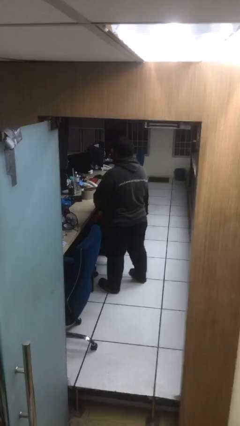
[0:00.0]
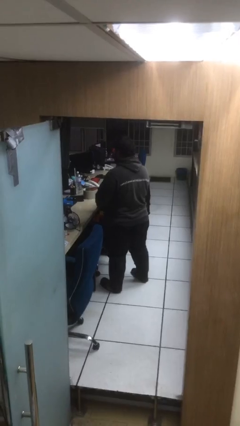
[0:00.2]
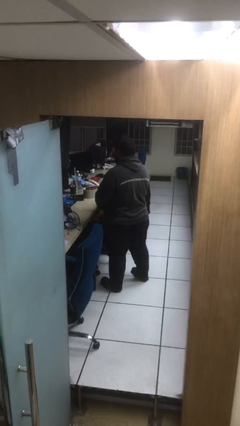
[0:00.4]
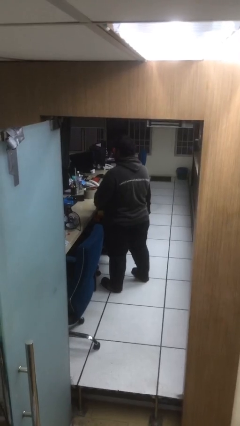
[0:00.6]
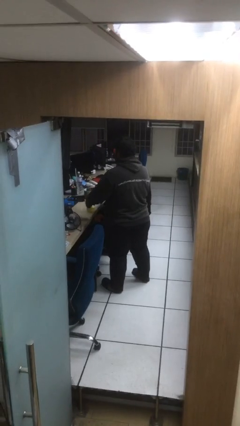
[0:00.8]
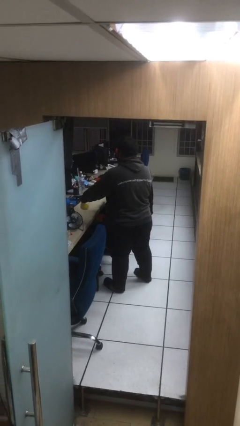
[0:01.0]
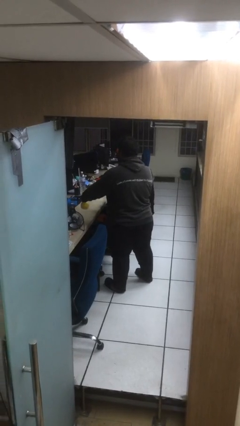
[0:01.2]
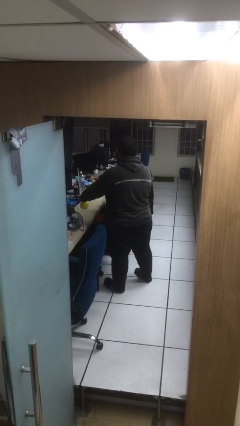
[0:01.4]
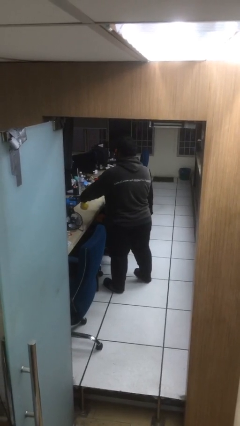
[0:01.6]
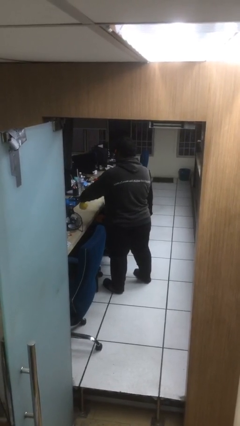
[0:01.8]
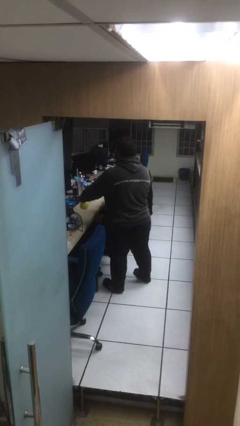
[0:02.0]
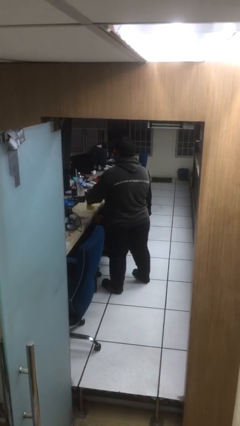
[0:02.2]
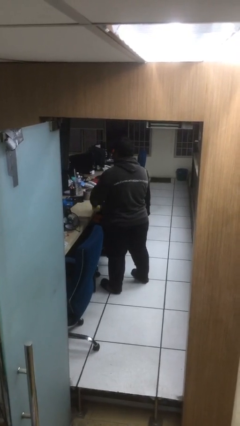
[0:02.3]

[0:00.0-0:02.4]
person sprays from bottle

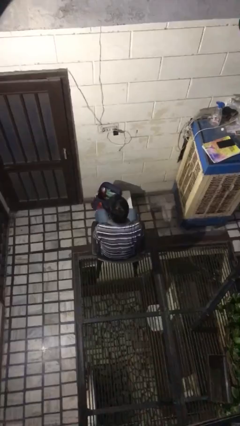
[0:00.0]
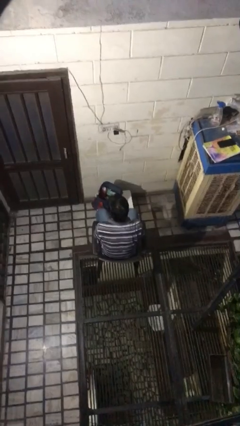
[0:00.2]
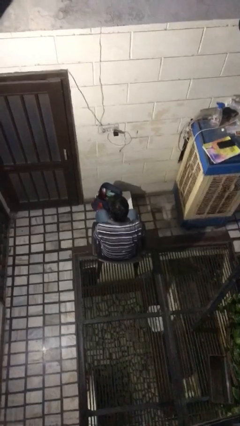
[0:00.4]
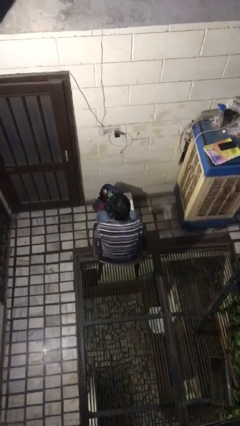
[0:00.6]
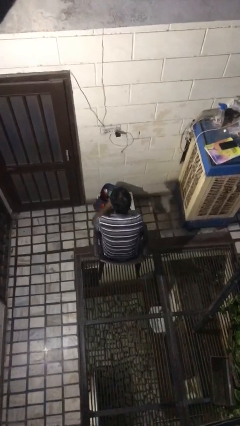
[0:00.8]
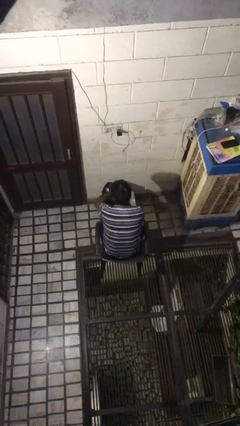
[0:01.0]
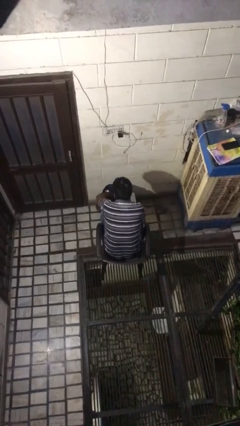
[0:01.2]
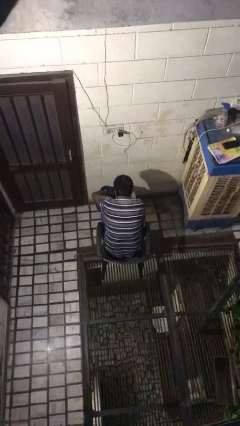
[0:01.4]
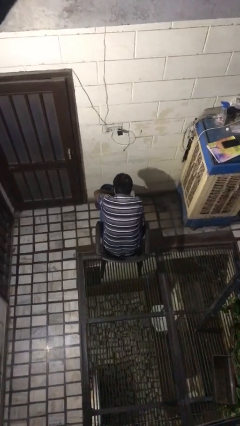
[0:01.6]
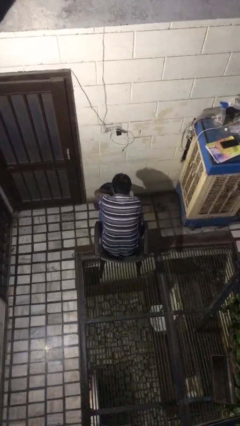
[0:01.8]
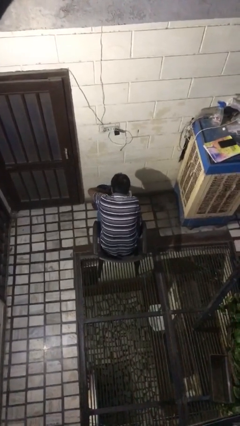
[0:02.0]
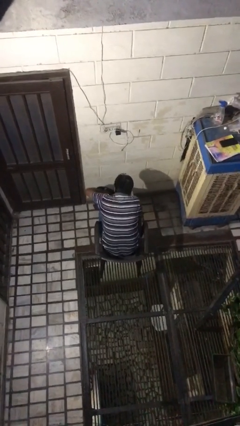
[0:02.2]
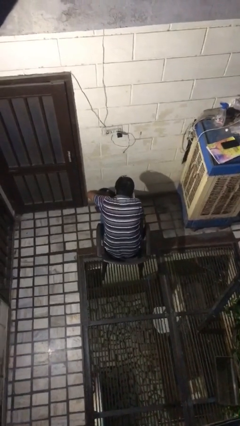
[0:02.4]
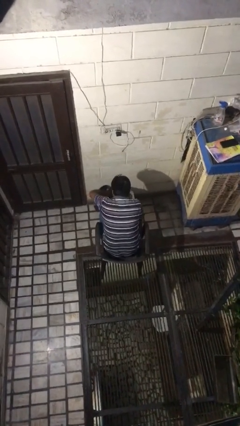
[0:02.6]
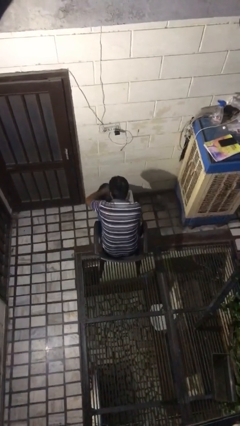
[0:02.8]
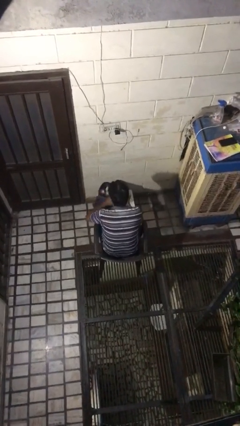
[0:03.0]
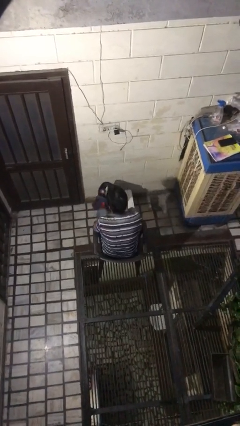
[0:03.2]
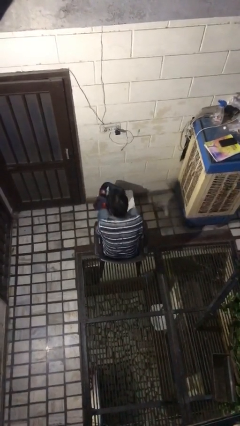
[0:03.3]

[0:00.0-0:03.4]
person searches in bag

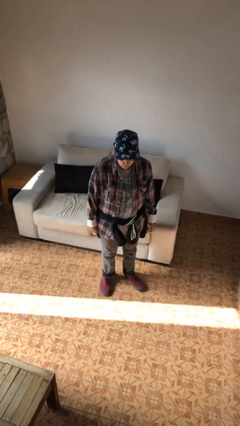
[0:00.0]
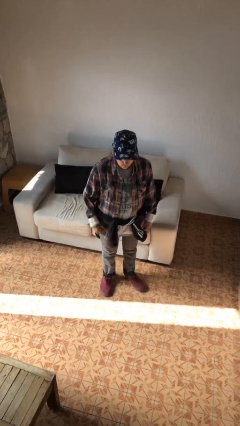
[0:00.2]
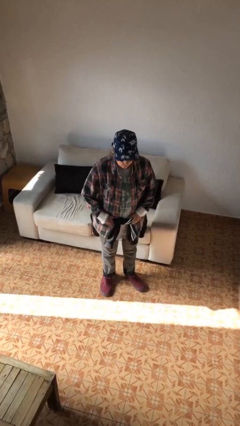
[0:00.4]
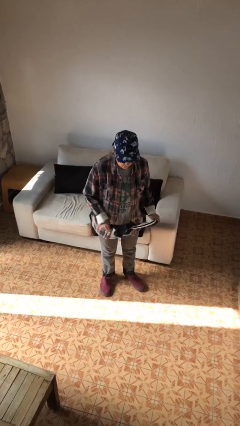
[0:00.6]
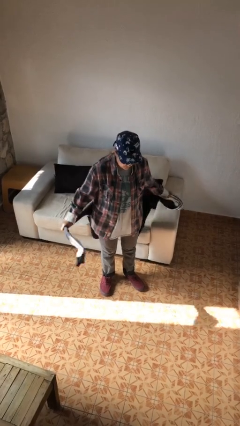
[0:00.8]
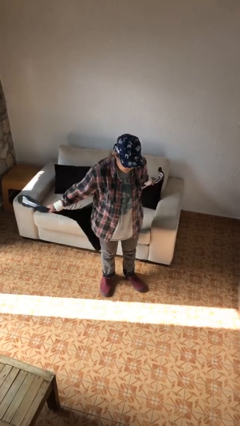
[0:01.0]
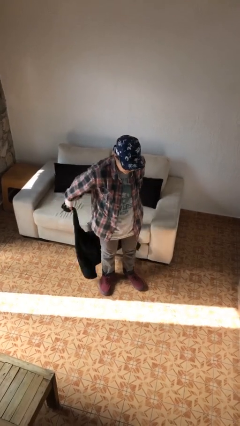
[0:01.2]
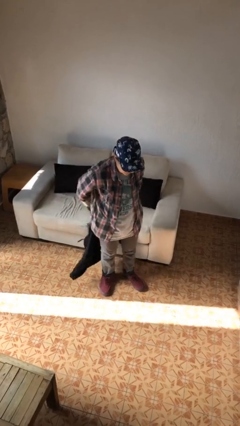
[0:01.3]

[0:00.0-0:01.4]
person unties jacket around waist

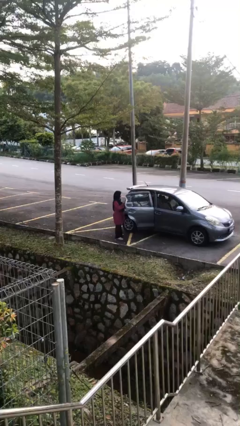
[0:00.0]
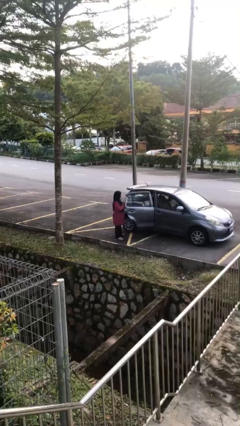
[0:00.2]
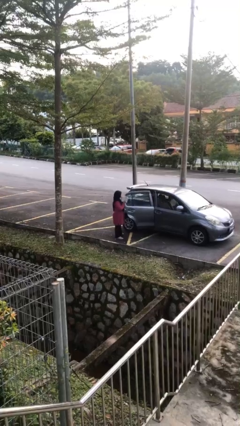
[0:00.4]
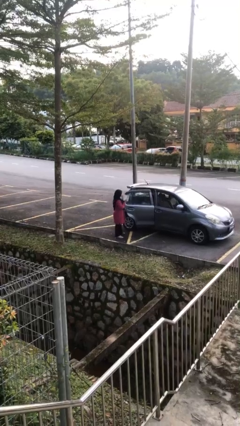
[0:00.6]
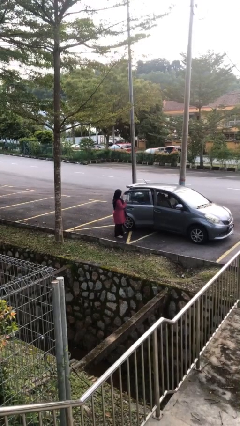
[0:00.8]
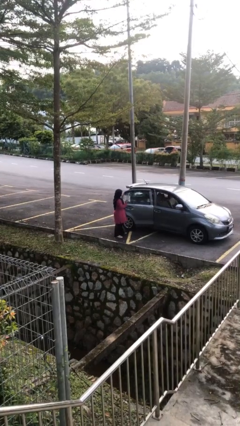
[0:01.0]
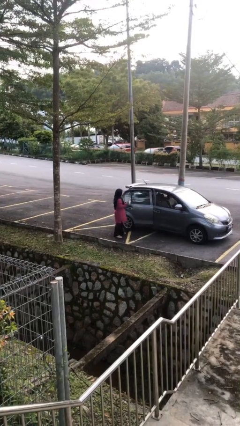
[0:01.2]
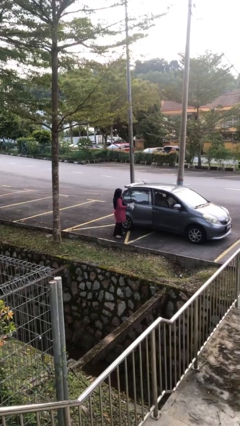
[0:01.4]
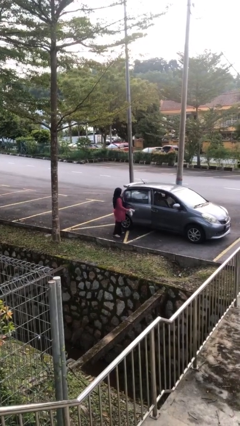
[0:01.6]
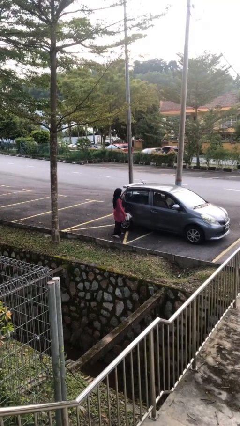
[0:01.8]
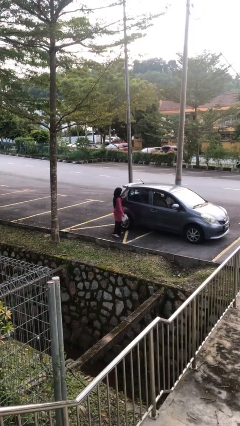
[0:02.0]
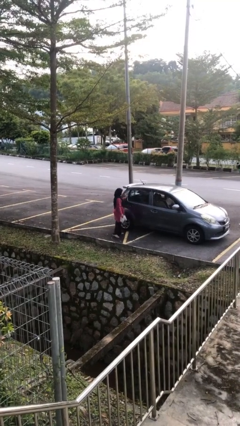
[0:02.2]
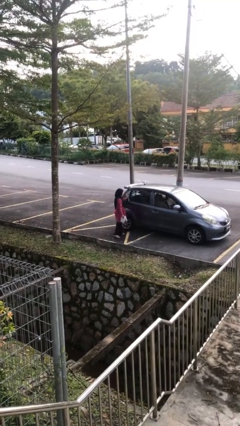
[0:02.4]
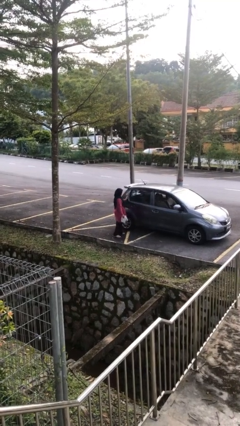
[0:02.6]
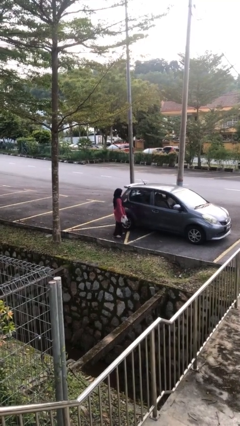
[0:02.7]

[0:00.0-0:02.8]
person closes car door

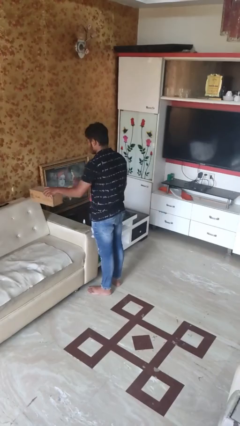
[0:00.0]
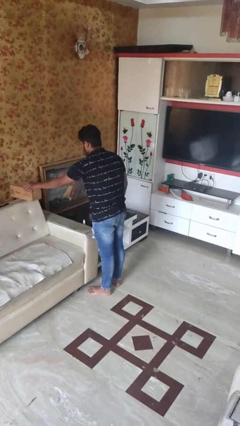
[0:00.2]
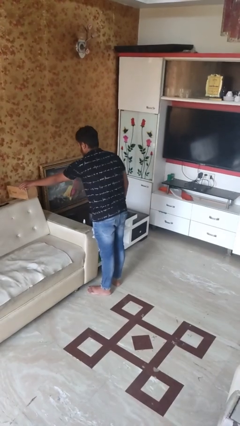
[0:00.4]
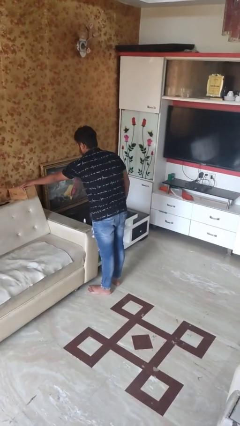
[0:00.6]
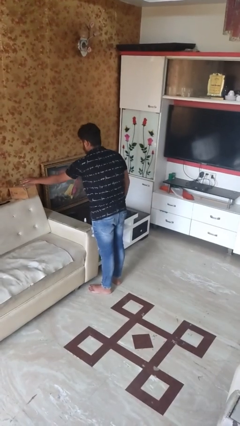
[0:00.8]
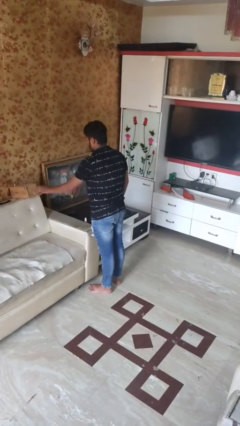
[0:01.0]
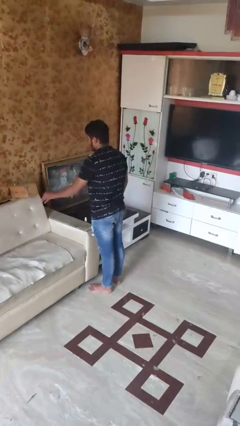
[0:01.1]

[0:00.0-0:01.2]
person puts down object on couch

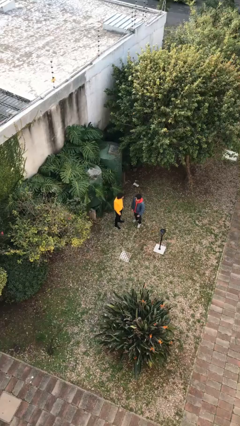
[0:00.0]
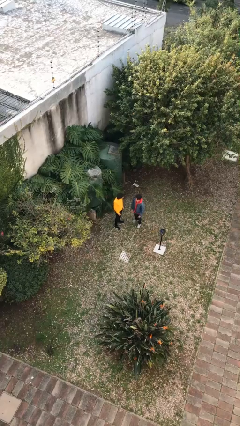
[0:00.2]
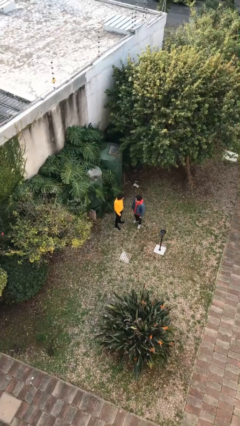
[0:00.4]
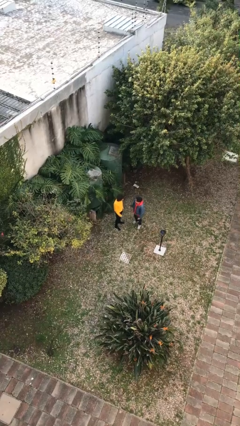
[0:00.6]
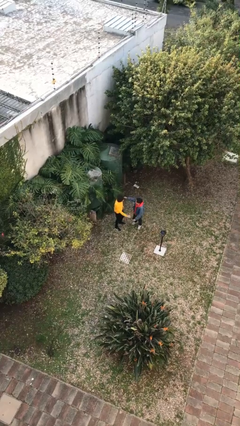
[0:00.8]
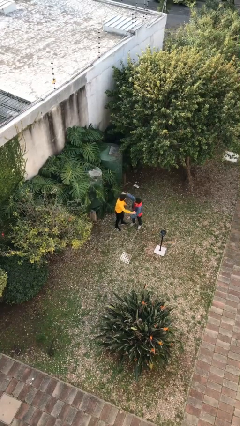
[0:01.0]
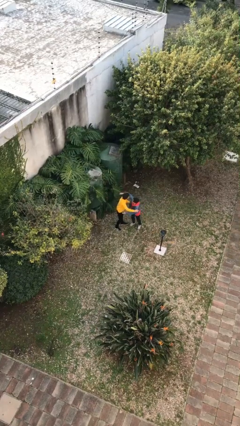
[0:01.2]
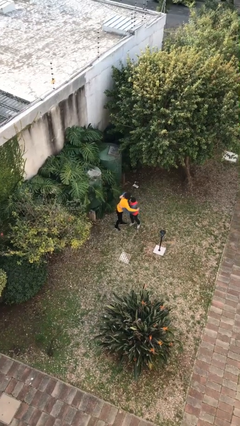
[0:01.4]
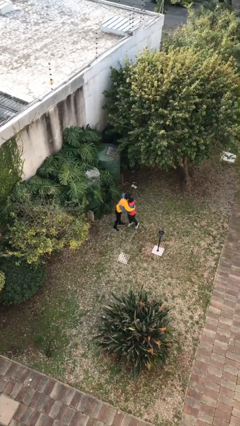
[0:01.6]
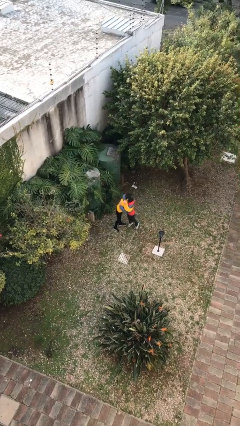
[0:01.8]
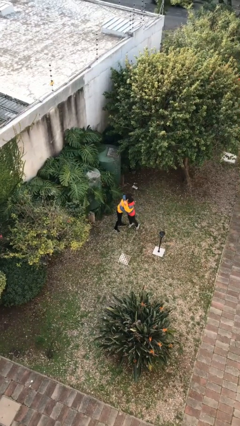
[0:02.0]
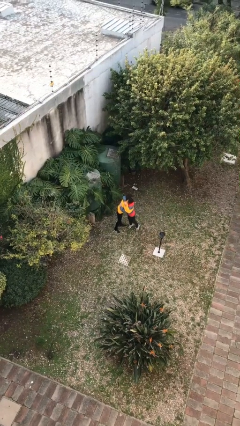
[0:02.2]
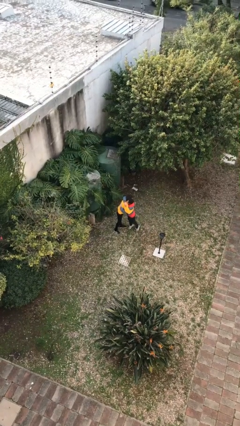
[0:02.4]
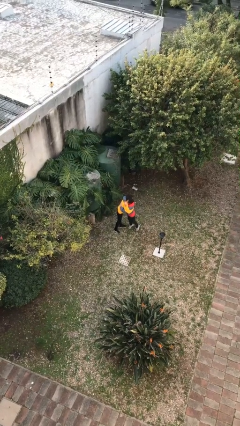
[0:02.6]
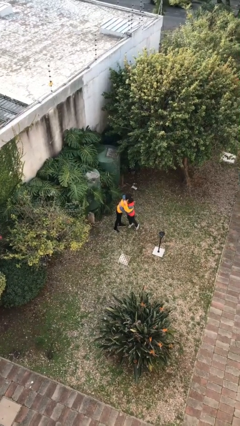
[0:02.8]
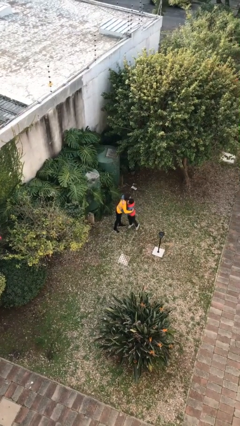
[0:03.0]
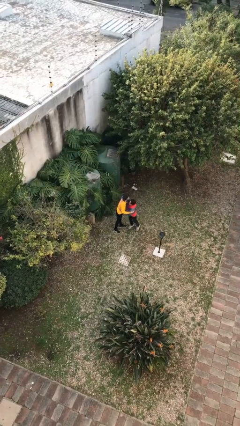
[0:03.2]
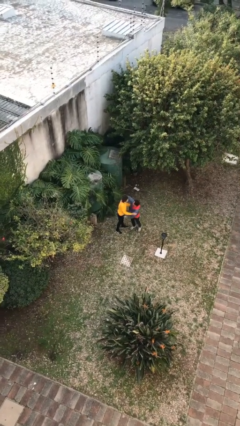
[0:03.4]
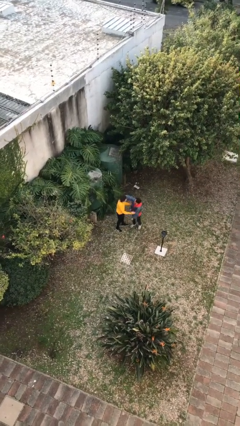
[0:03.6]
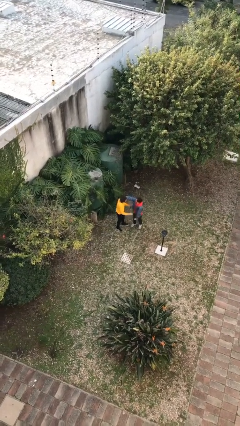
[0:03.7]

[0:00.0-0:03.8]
person embraces person

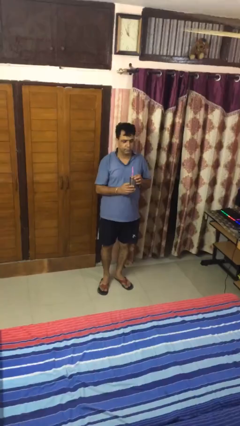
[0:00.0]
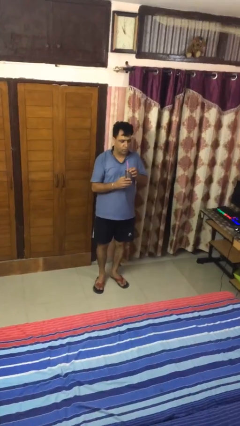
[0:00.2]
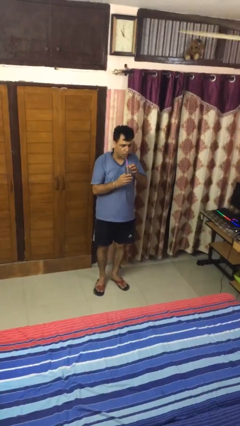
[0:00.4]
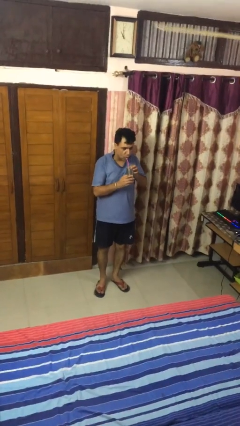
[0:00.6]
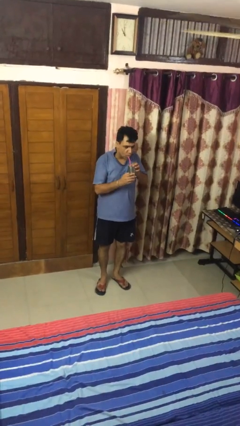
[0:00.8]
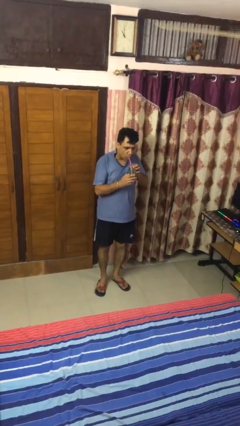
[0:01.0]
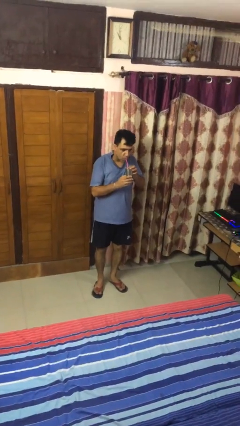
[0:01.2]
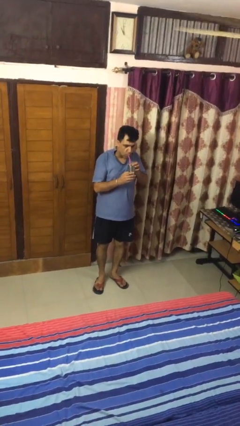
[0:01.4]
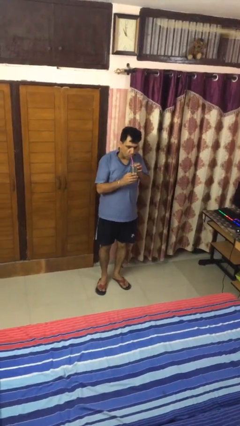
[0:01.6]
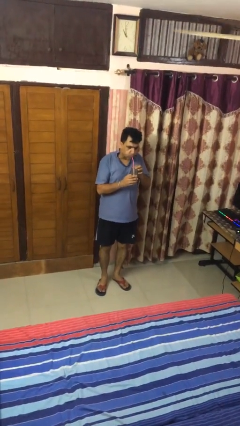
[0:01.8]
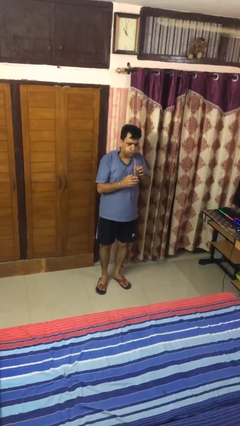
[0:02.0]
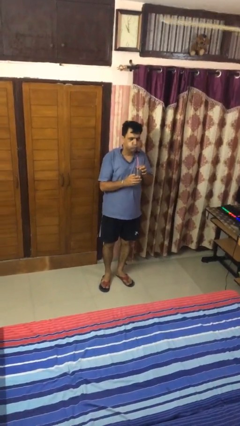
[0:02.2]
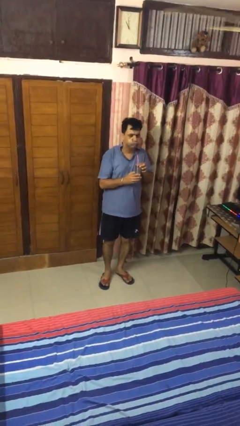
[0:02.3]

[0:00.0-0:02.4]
person drinks from straw
